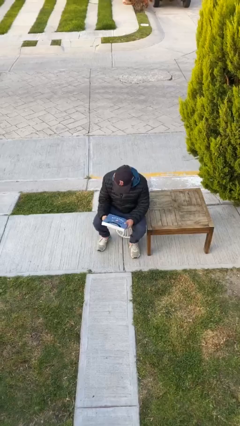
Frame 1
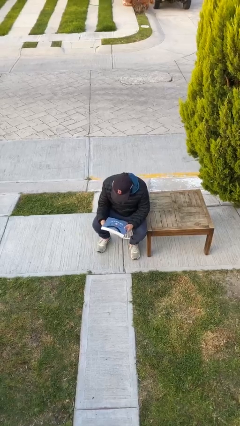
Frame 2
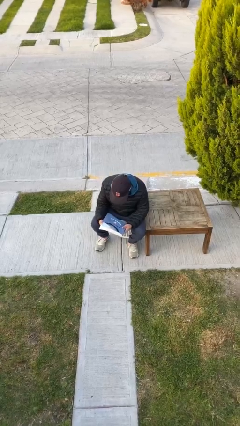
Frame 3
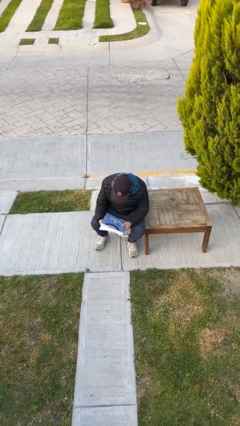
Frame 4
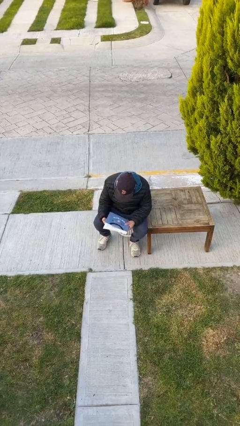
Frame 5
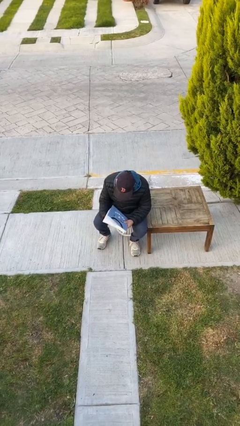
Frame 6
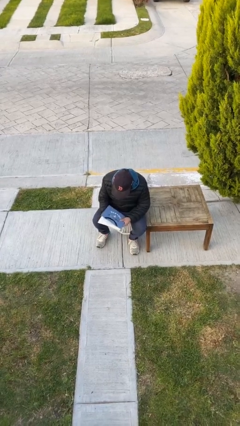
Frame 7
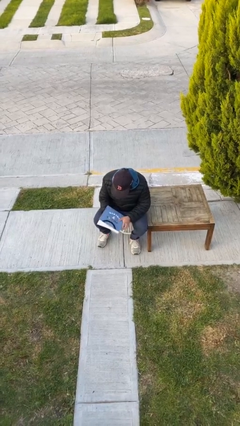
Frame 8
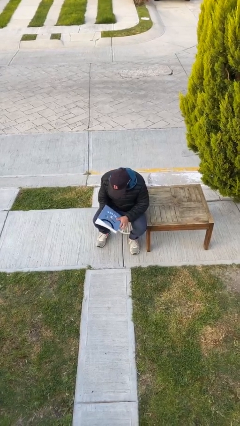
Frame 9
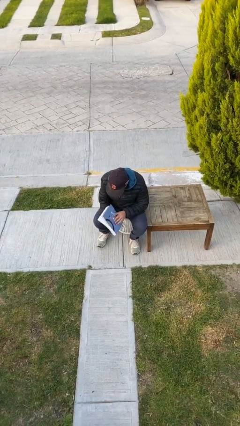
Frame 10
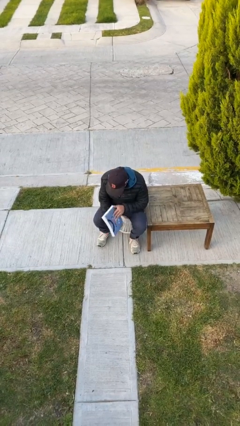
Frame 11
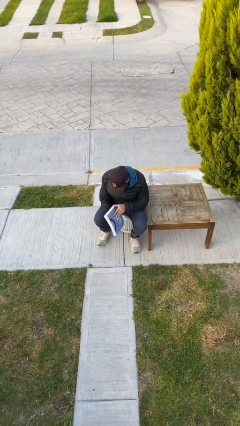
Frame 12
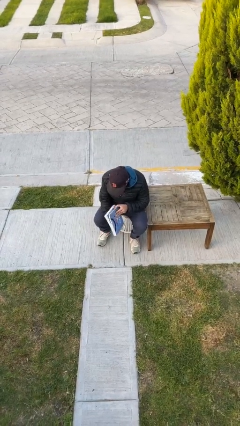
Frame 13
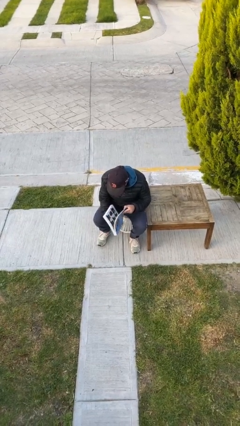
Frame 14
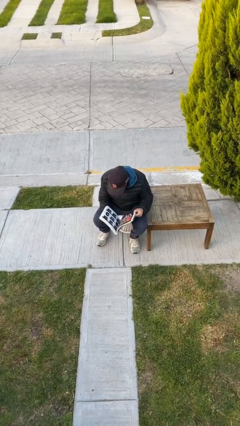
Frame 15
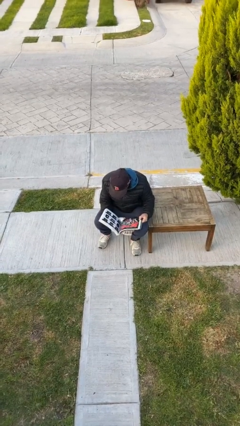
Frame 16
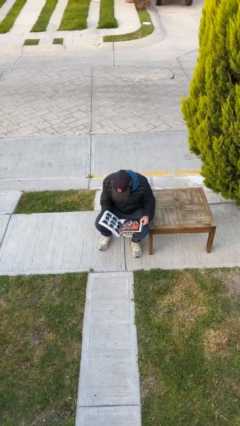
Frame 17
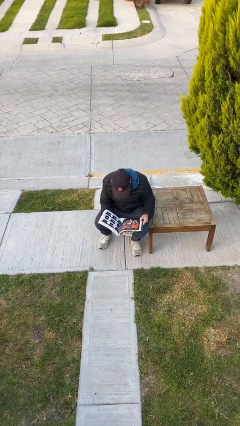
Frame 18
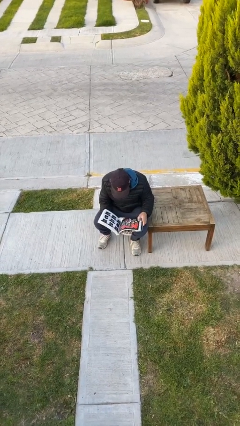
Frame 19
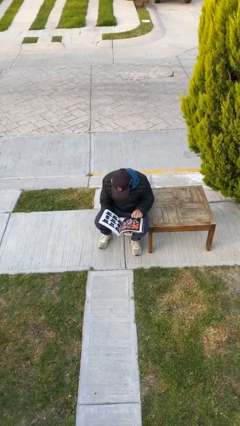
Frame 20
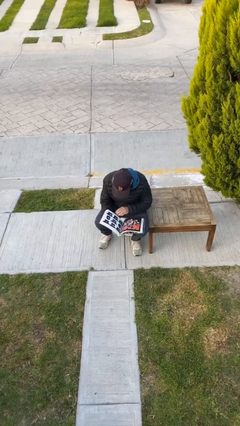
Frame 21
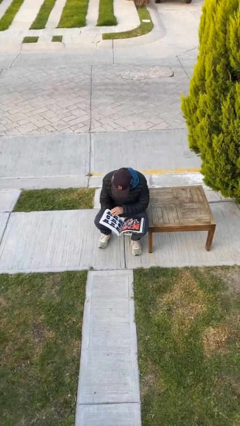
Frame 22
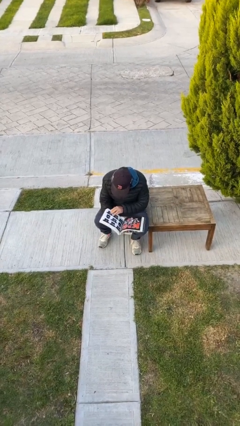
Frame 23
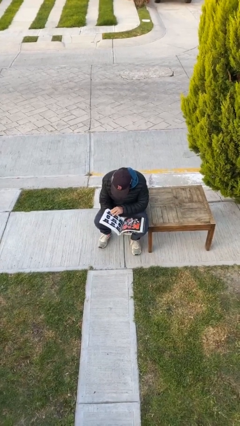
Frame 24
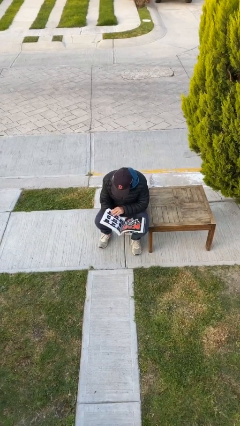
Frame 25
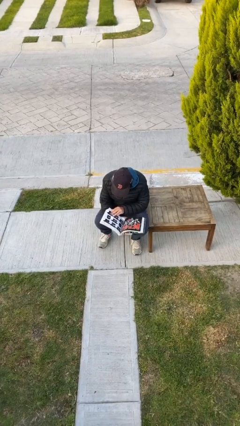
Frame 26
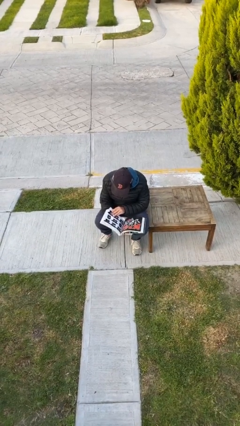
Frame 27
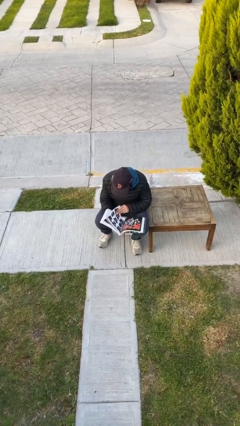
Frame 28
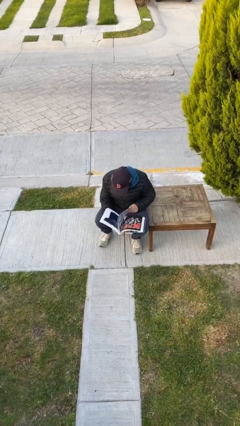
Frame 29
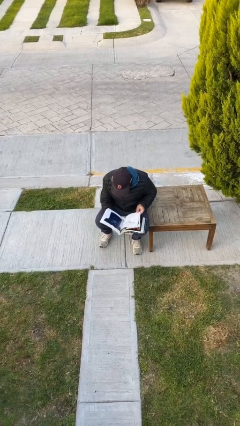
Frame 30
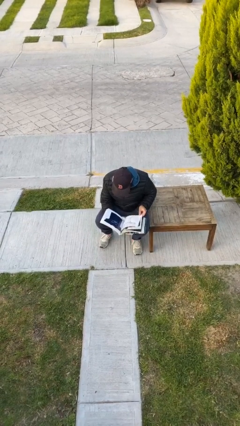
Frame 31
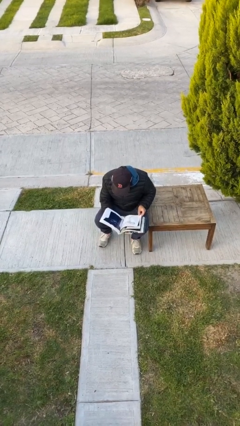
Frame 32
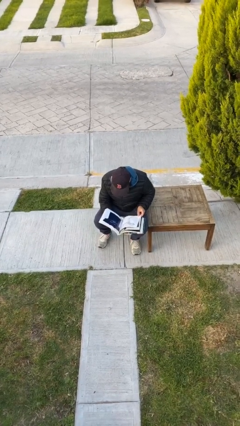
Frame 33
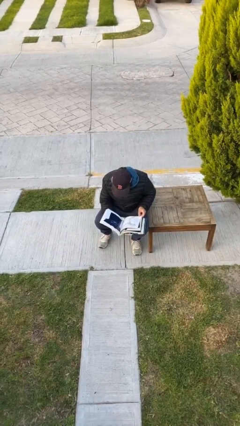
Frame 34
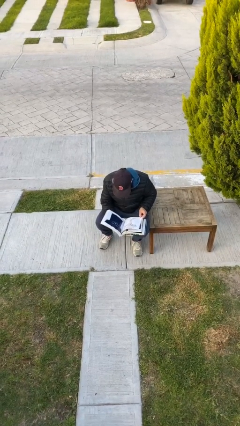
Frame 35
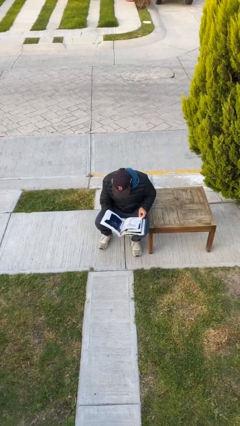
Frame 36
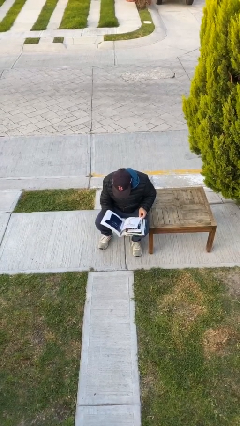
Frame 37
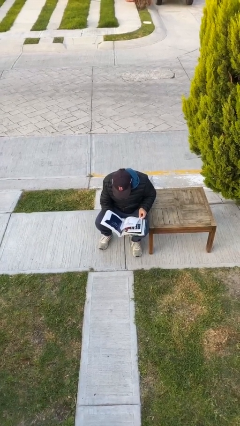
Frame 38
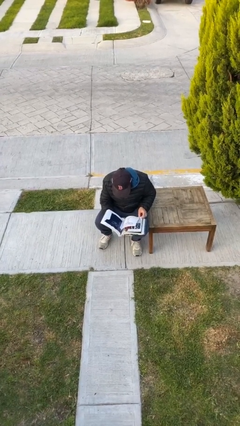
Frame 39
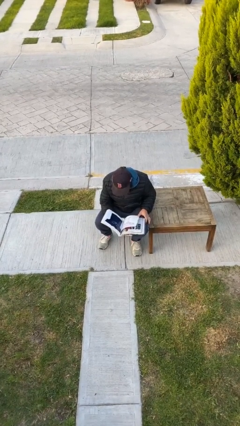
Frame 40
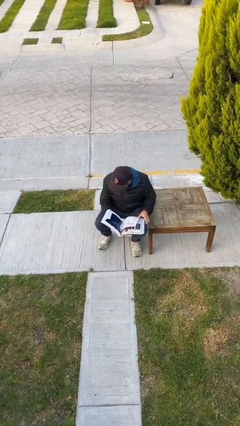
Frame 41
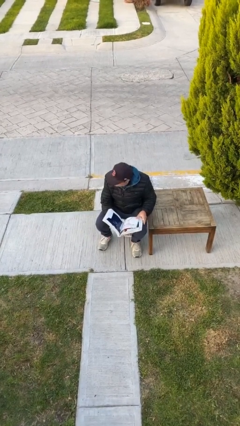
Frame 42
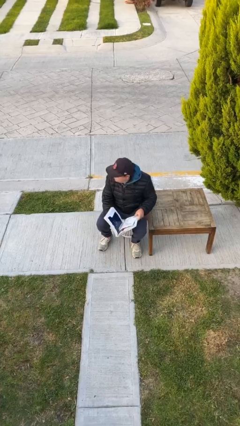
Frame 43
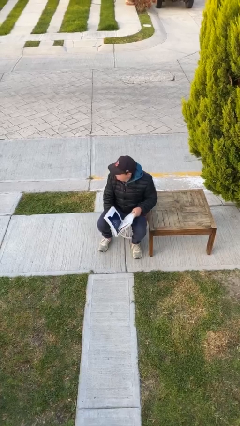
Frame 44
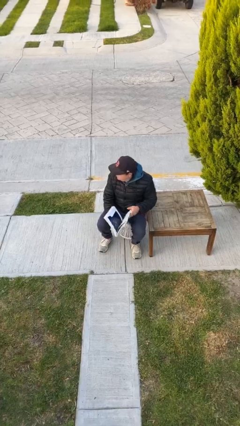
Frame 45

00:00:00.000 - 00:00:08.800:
person reads document

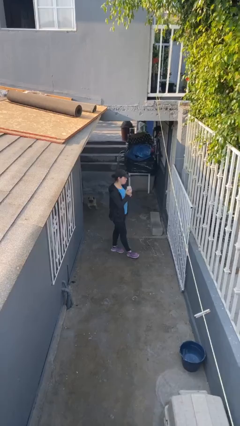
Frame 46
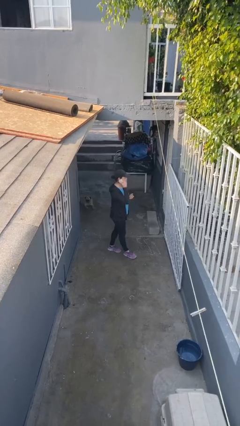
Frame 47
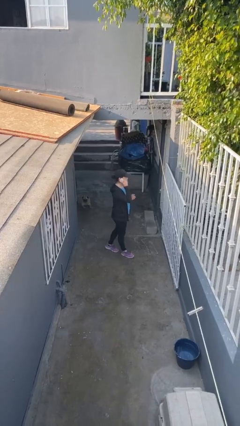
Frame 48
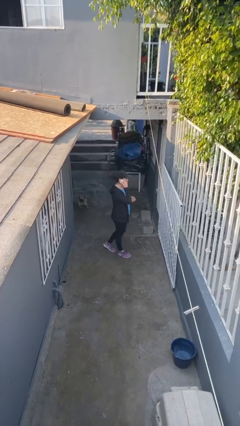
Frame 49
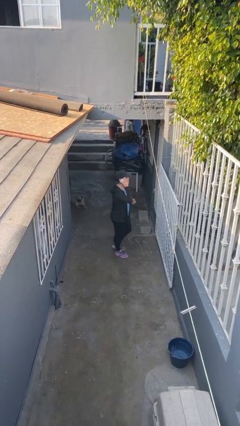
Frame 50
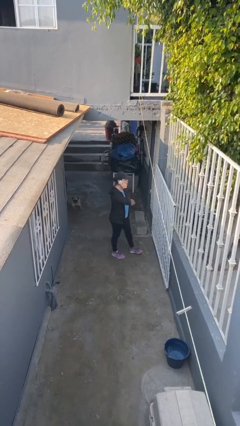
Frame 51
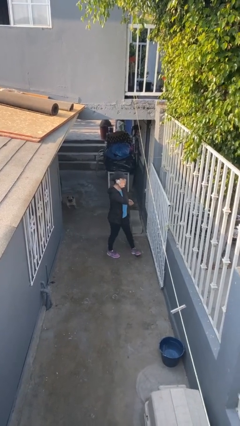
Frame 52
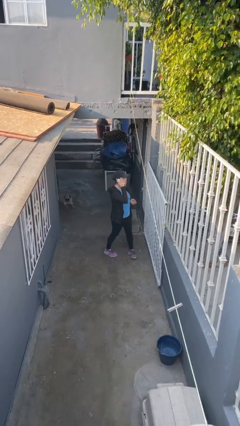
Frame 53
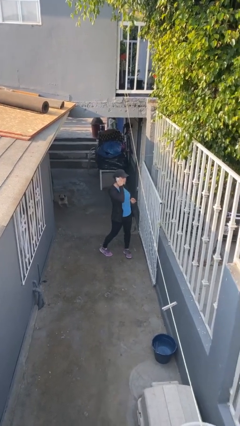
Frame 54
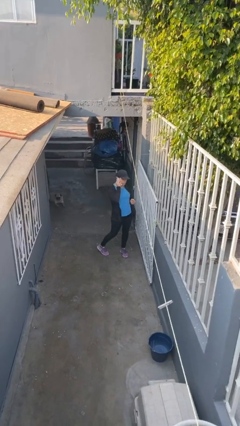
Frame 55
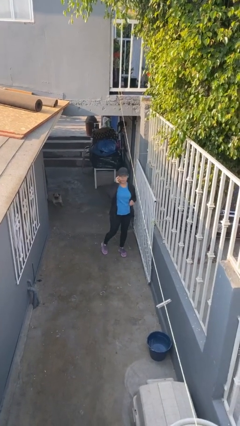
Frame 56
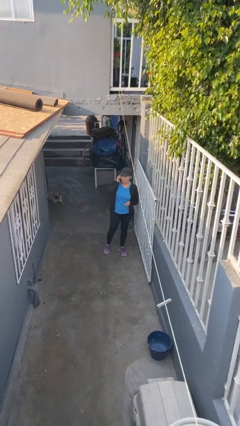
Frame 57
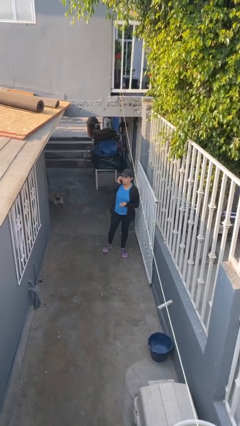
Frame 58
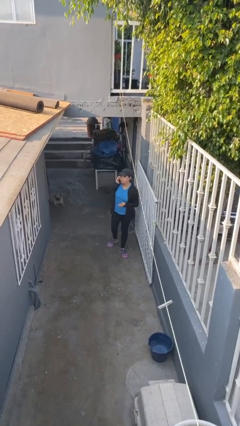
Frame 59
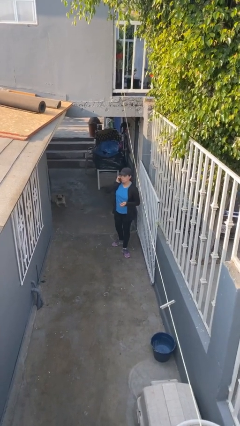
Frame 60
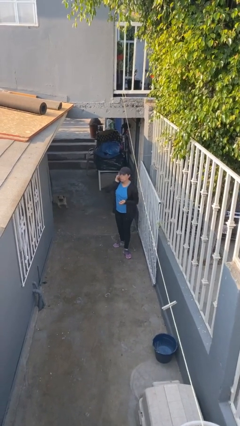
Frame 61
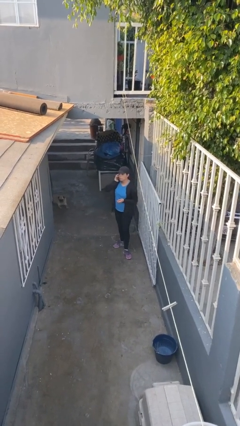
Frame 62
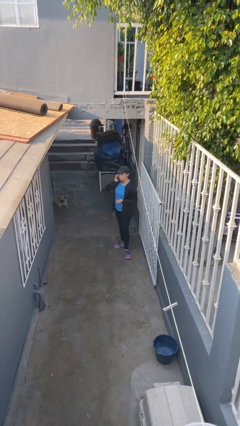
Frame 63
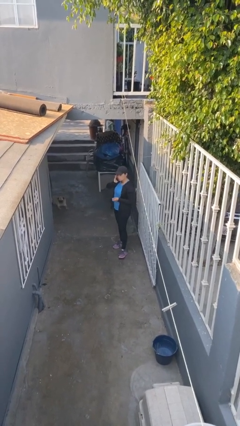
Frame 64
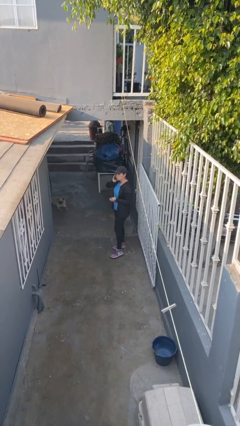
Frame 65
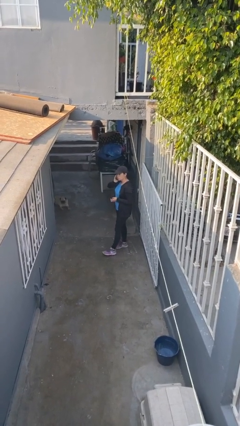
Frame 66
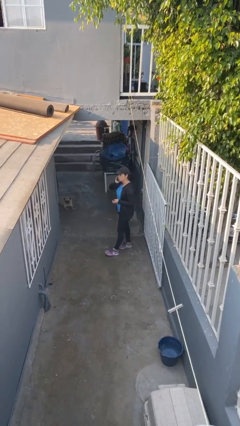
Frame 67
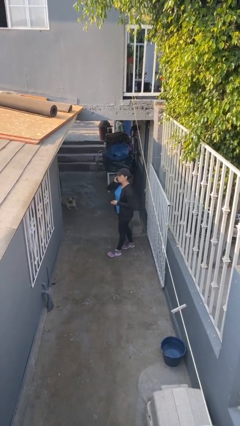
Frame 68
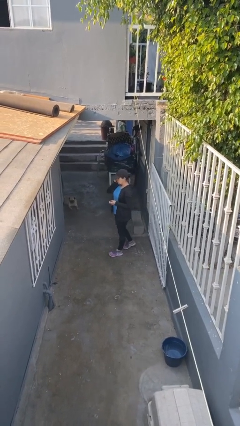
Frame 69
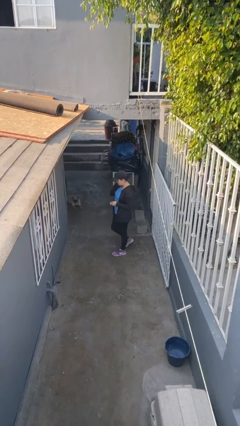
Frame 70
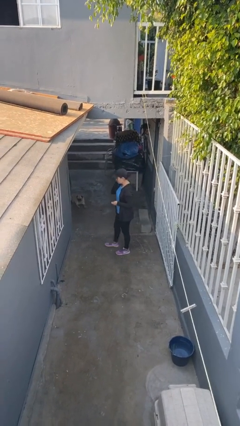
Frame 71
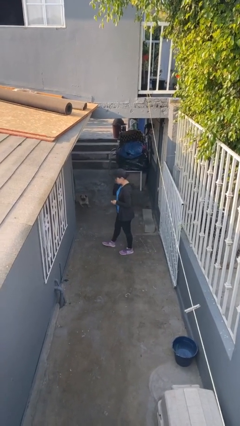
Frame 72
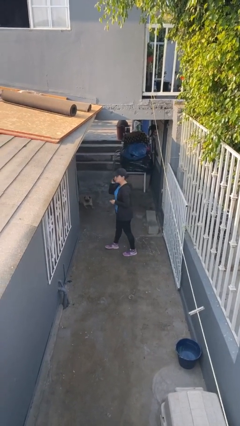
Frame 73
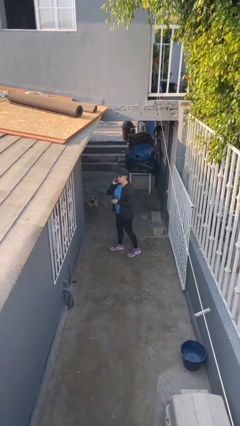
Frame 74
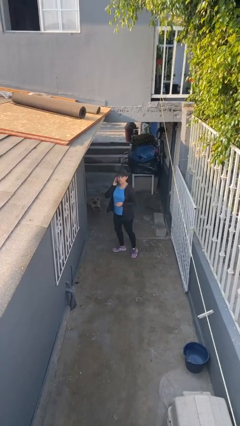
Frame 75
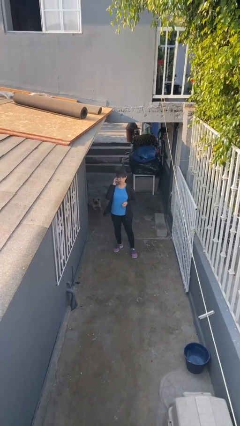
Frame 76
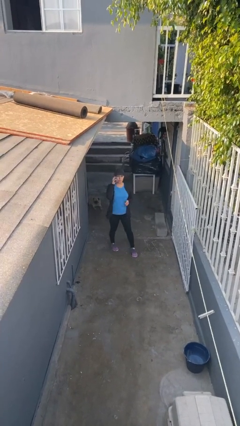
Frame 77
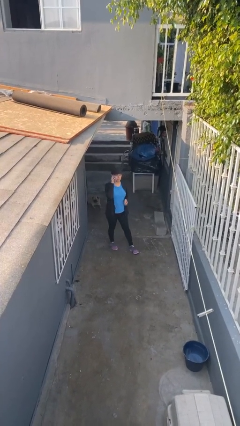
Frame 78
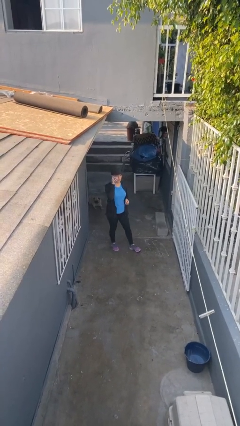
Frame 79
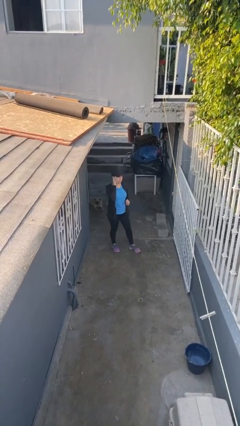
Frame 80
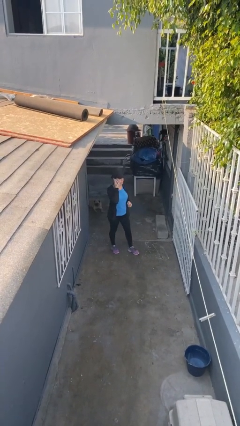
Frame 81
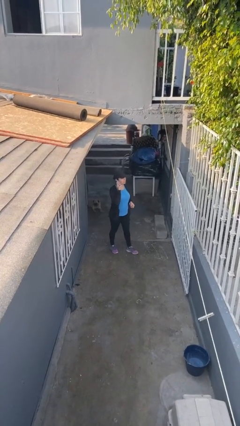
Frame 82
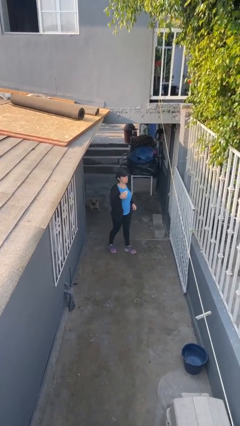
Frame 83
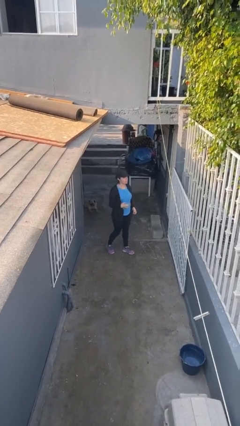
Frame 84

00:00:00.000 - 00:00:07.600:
person talks on phone

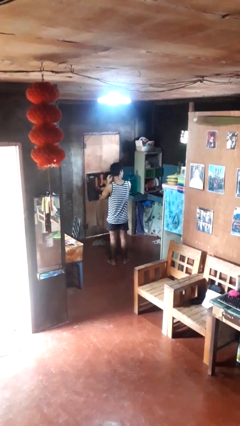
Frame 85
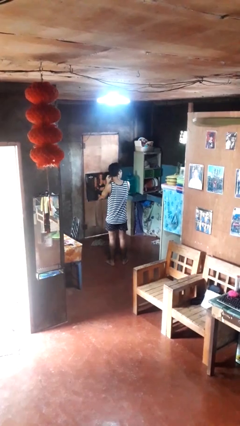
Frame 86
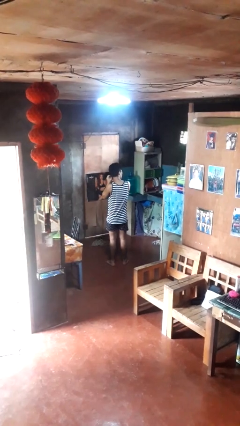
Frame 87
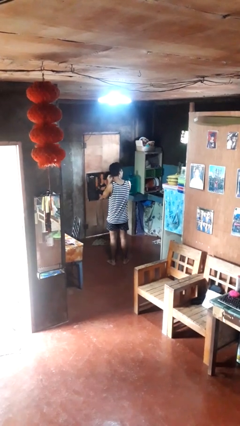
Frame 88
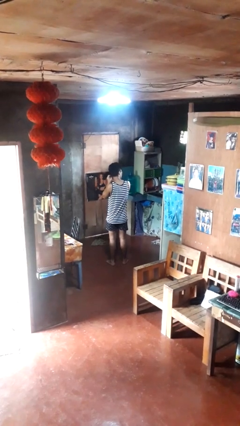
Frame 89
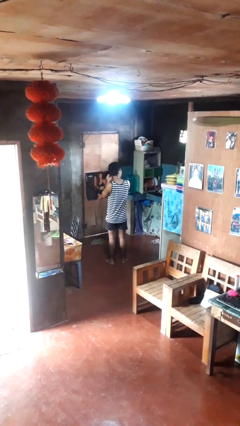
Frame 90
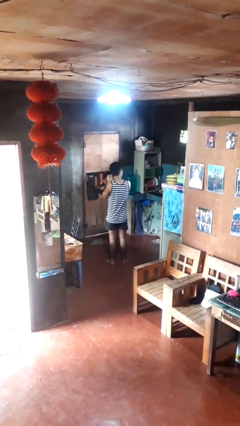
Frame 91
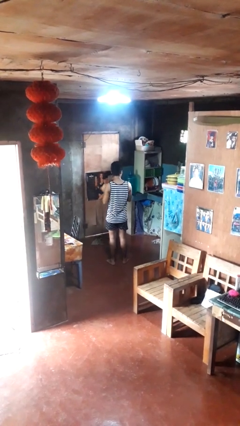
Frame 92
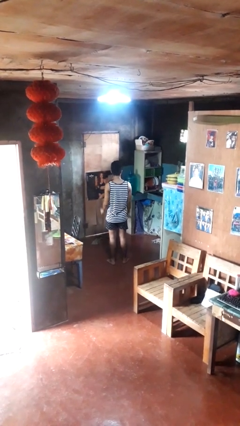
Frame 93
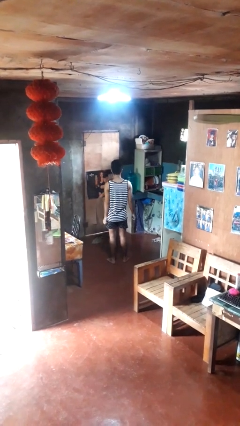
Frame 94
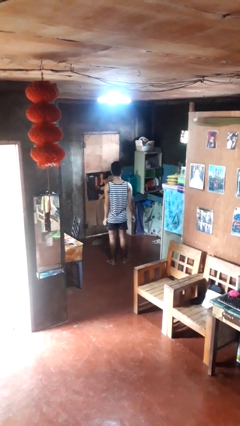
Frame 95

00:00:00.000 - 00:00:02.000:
person takes off earrings
